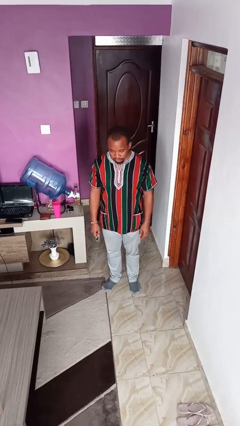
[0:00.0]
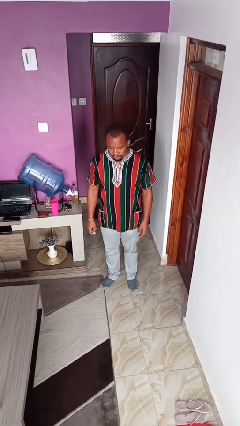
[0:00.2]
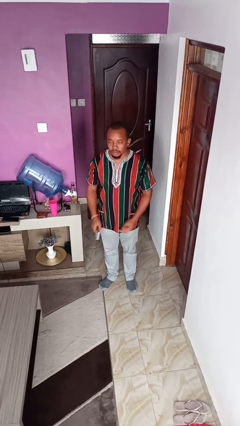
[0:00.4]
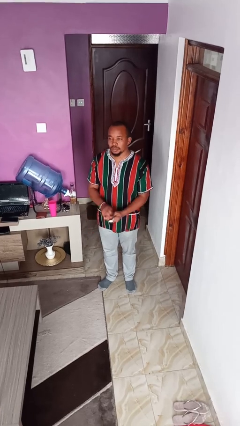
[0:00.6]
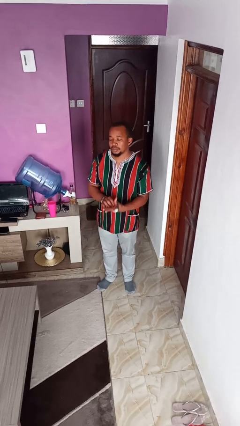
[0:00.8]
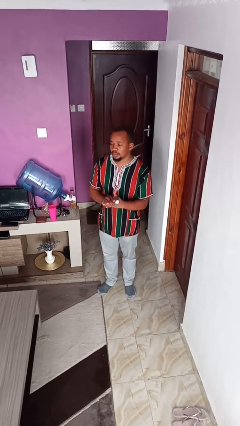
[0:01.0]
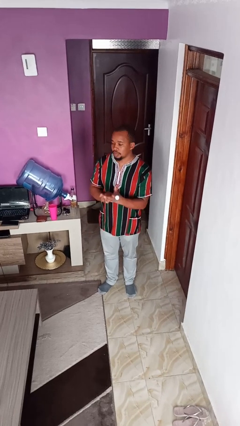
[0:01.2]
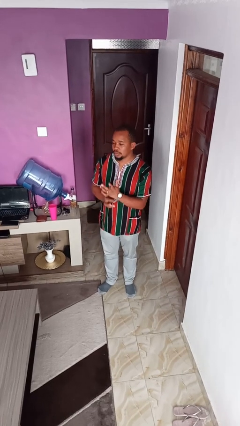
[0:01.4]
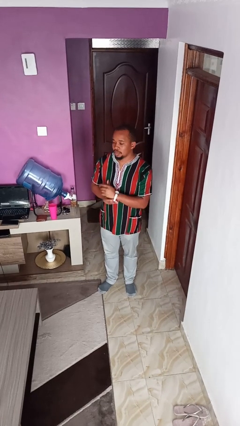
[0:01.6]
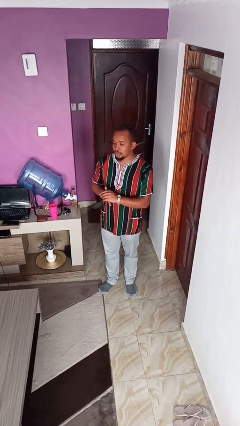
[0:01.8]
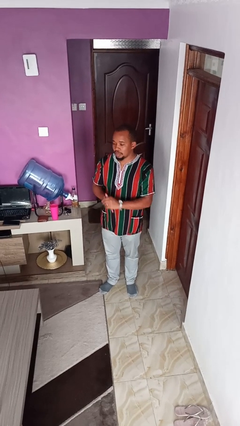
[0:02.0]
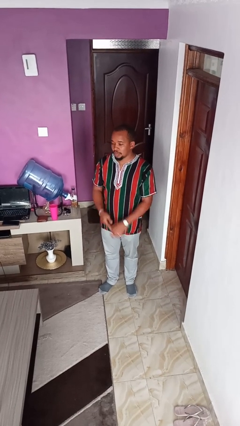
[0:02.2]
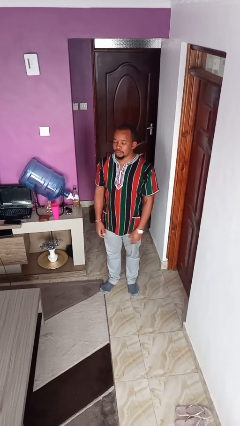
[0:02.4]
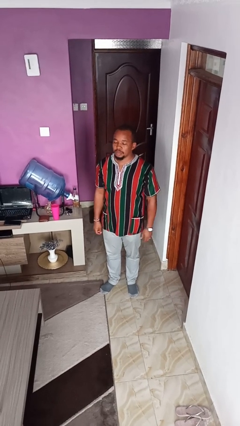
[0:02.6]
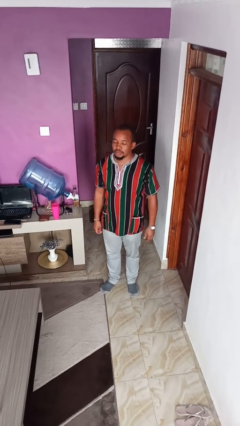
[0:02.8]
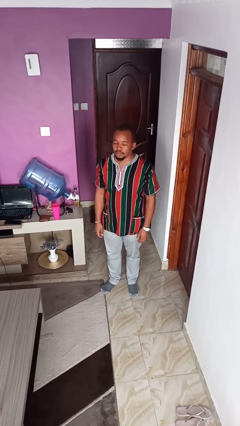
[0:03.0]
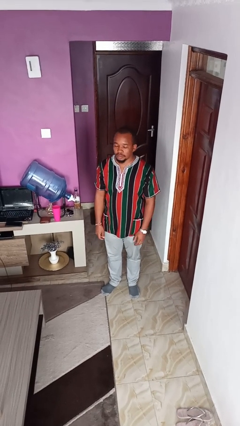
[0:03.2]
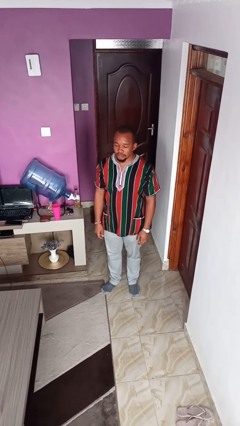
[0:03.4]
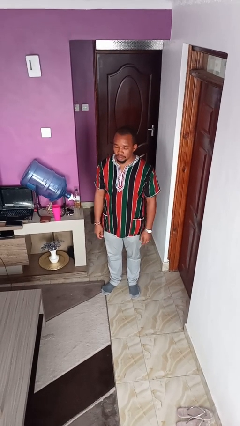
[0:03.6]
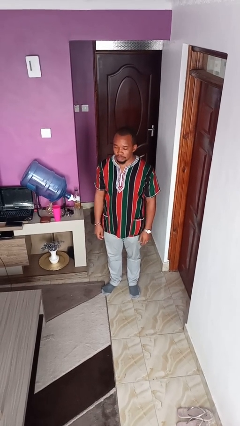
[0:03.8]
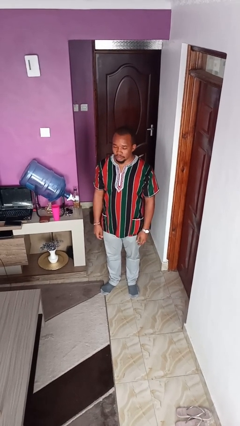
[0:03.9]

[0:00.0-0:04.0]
person puts on wristwatch

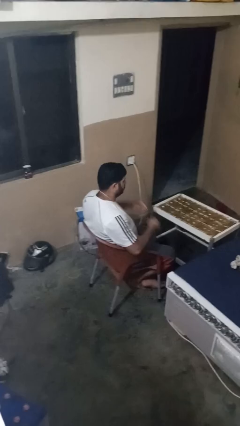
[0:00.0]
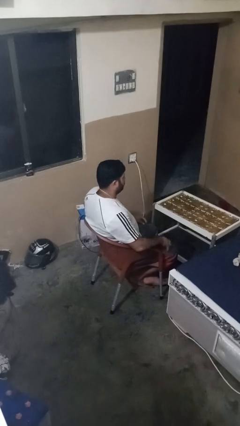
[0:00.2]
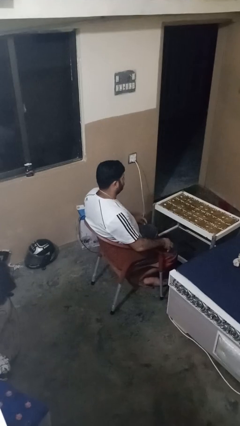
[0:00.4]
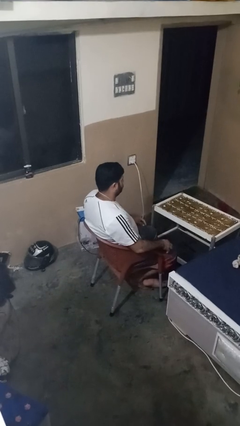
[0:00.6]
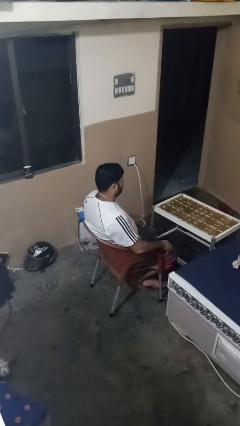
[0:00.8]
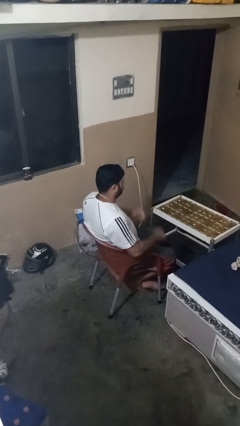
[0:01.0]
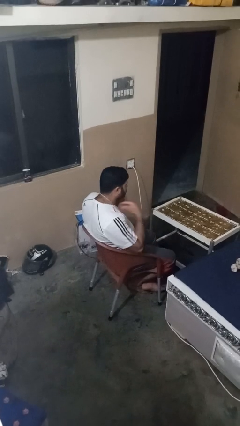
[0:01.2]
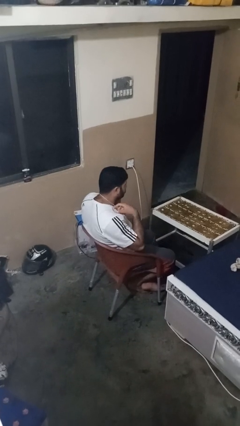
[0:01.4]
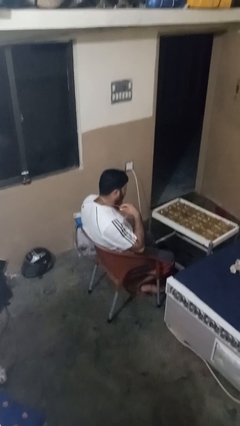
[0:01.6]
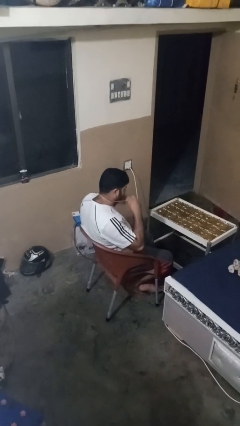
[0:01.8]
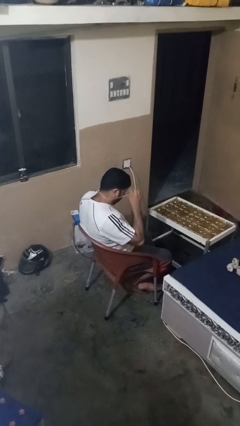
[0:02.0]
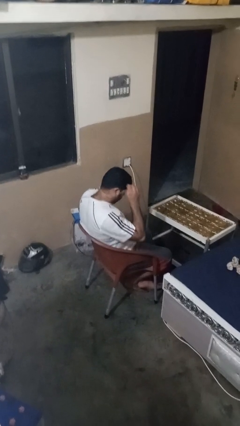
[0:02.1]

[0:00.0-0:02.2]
person takes off necklace

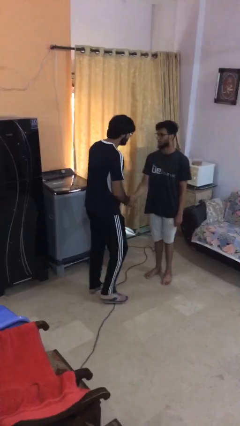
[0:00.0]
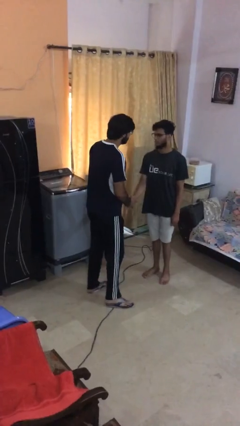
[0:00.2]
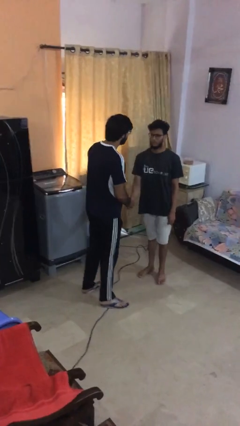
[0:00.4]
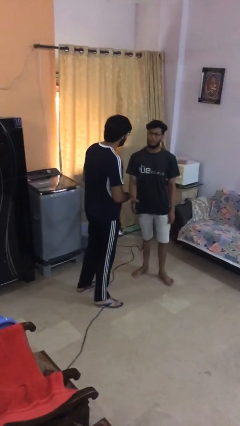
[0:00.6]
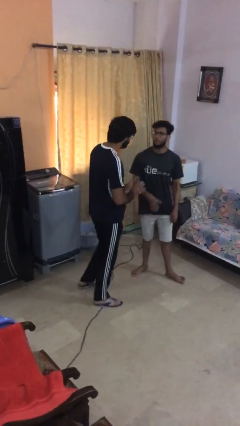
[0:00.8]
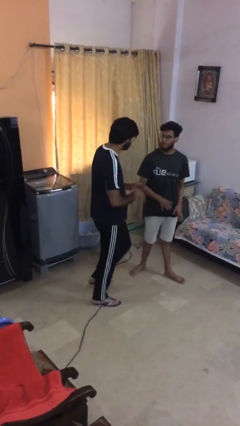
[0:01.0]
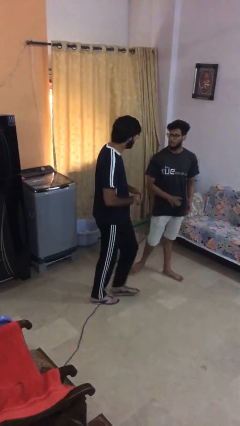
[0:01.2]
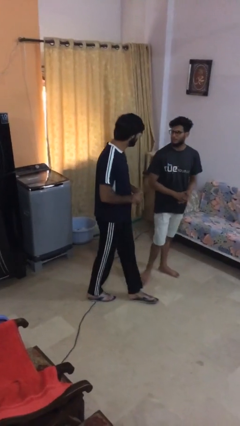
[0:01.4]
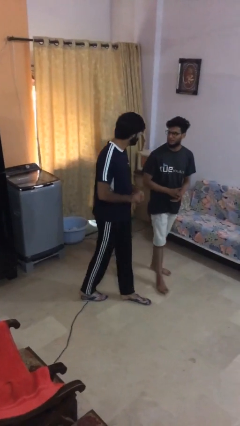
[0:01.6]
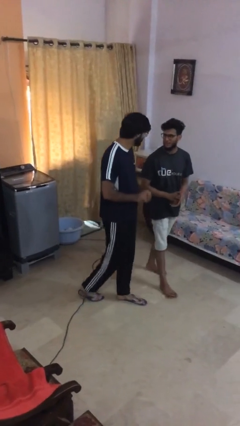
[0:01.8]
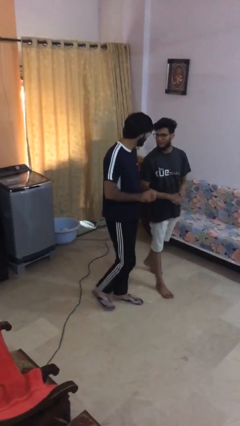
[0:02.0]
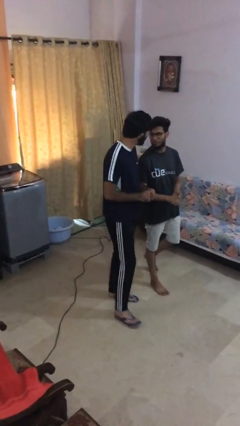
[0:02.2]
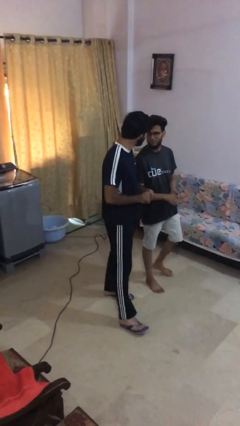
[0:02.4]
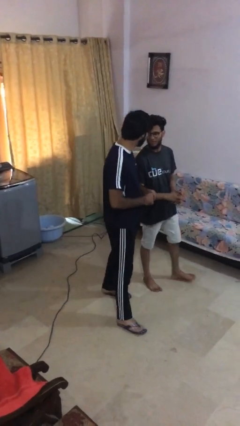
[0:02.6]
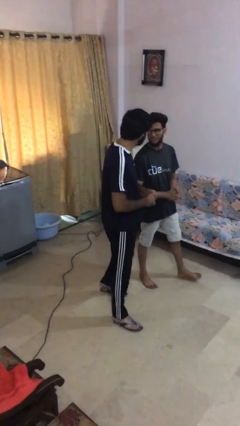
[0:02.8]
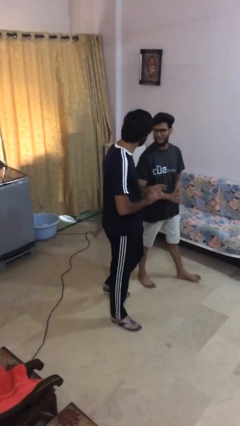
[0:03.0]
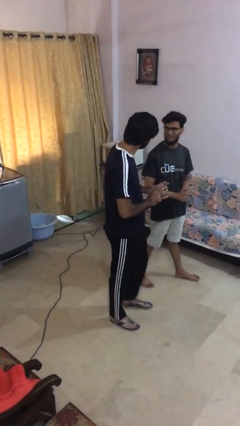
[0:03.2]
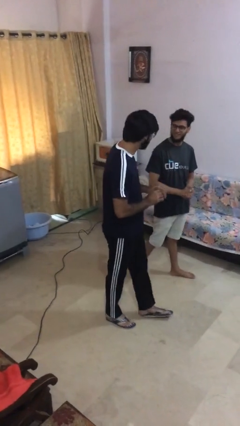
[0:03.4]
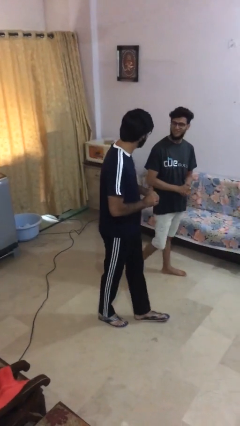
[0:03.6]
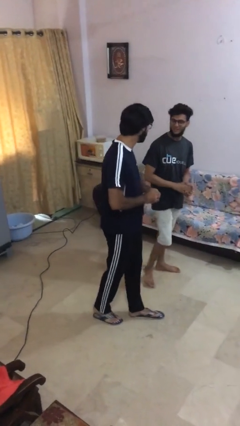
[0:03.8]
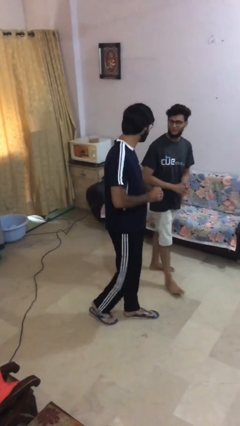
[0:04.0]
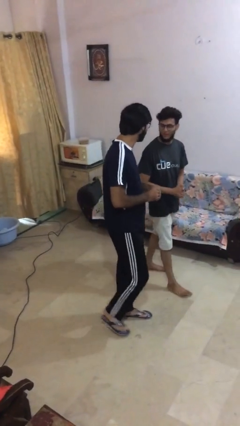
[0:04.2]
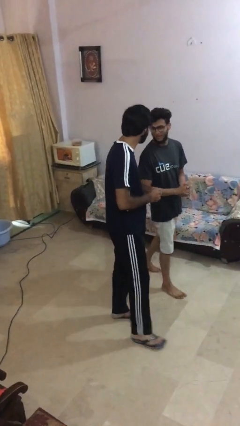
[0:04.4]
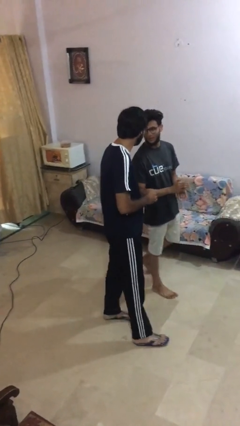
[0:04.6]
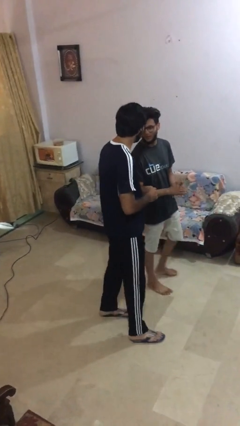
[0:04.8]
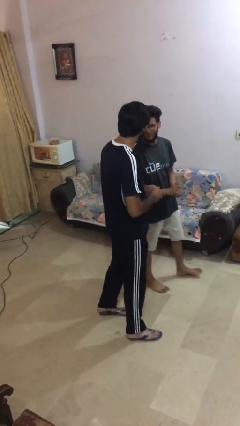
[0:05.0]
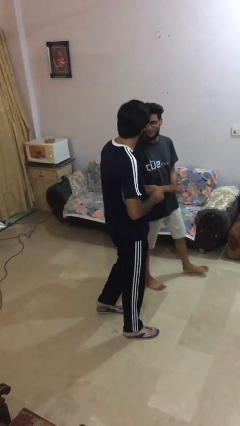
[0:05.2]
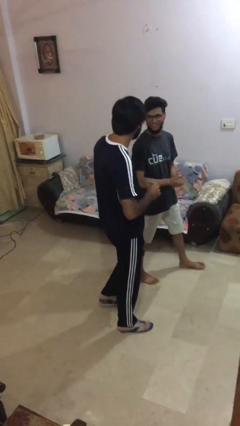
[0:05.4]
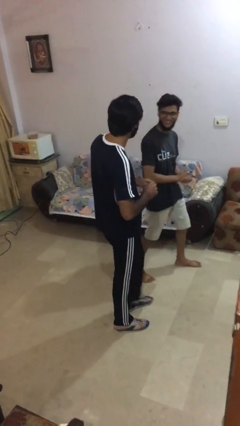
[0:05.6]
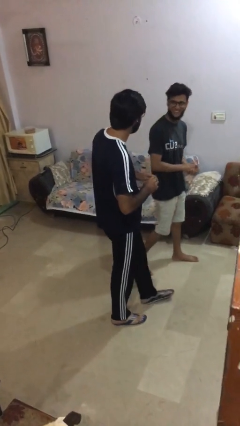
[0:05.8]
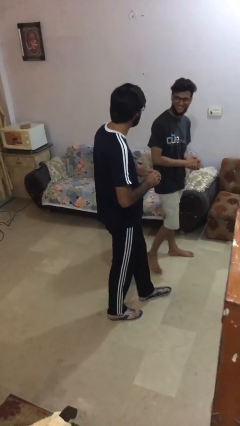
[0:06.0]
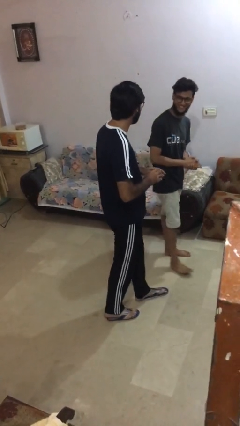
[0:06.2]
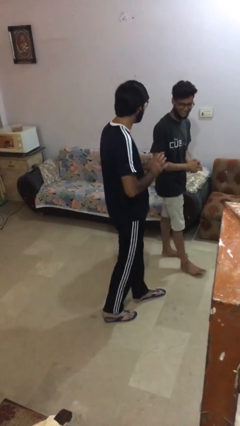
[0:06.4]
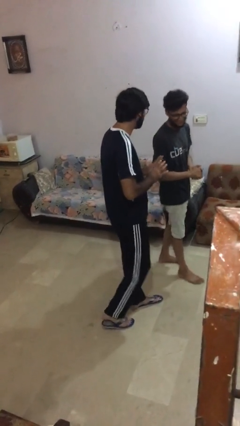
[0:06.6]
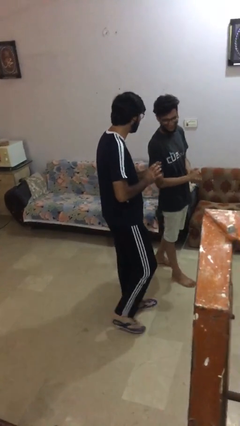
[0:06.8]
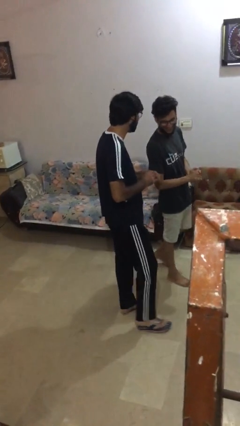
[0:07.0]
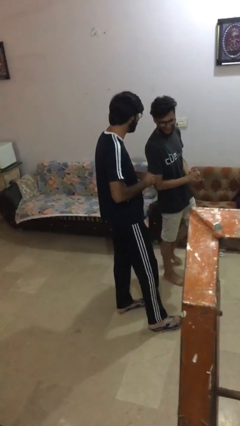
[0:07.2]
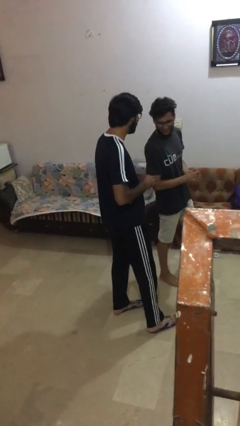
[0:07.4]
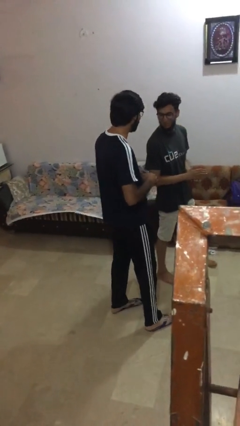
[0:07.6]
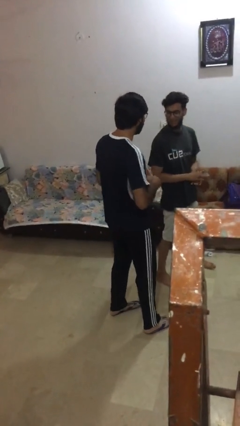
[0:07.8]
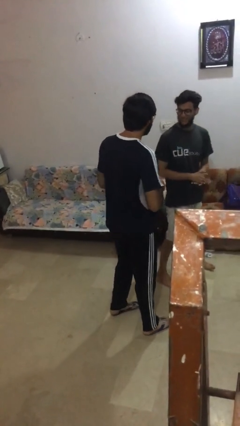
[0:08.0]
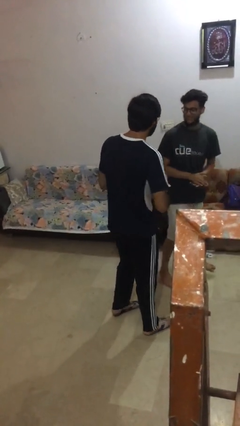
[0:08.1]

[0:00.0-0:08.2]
person talks to person

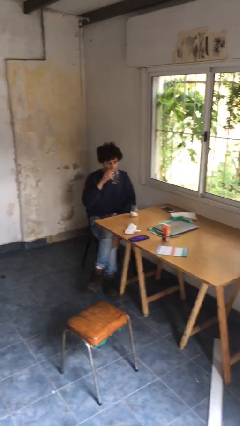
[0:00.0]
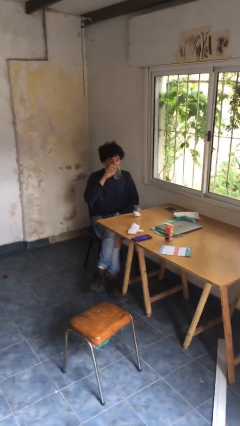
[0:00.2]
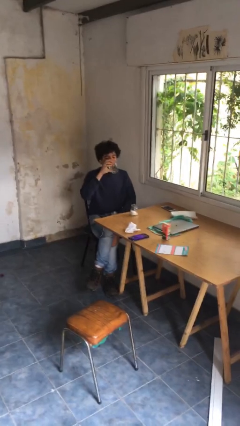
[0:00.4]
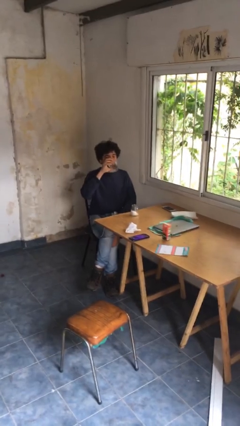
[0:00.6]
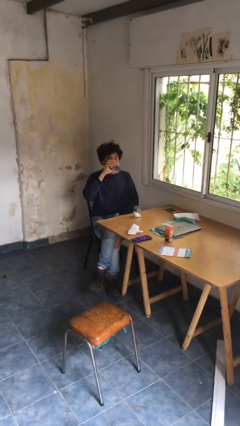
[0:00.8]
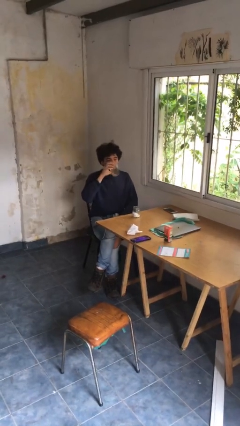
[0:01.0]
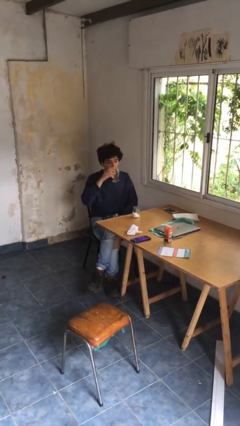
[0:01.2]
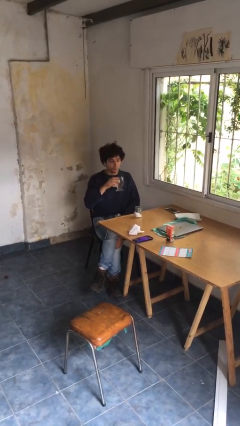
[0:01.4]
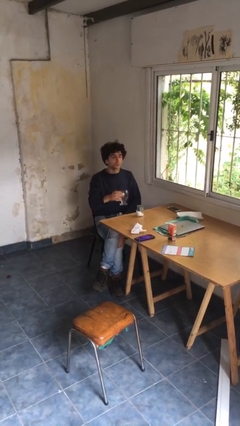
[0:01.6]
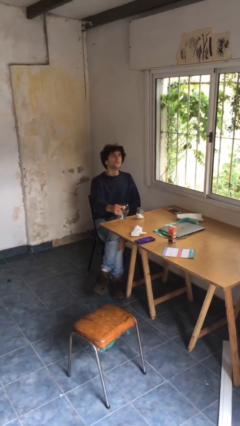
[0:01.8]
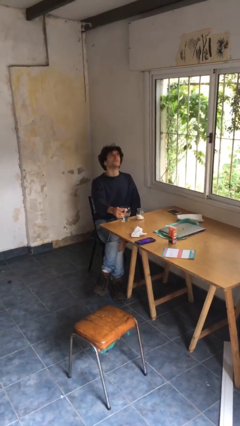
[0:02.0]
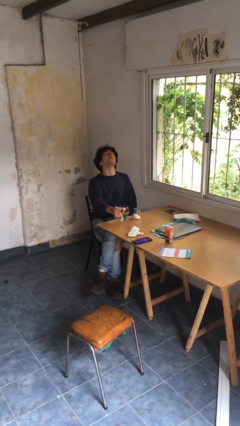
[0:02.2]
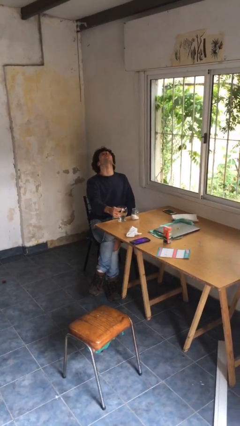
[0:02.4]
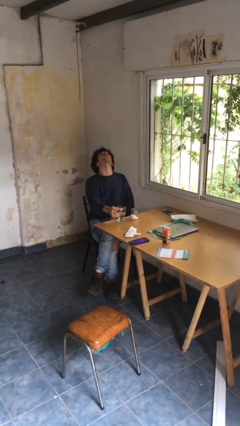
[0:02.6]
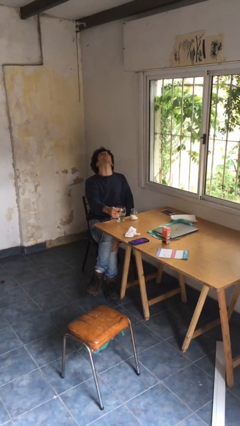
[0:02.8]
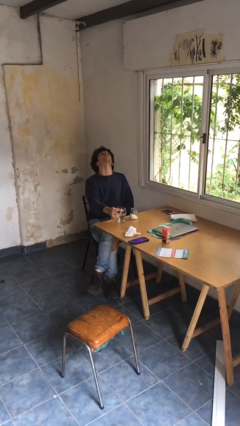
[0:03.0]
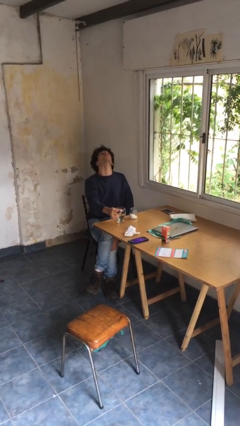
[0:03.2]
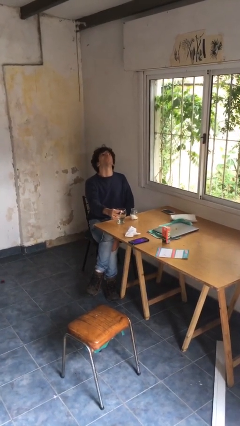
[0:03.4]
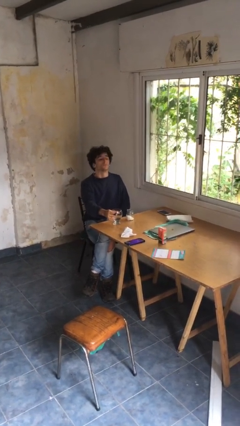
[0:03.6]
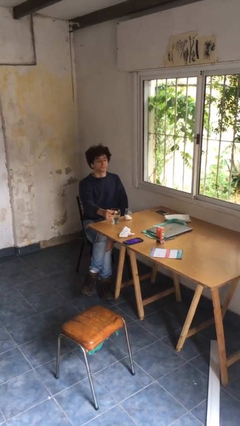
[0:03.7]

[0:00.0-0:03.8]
person drinks from cup
